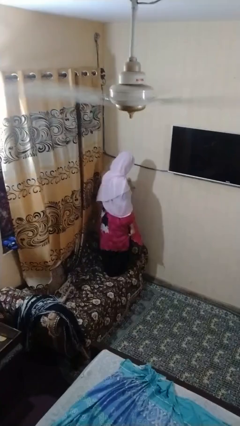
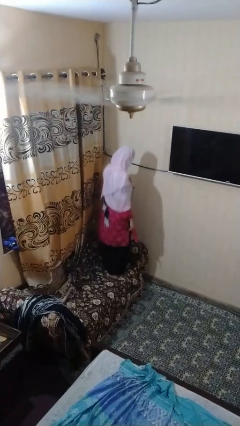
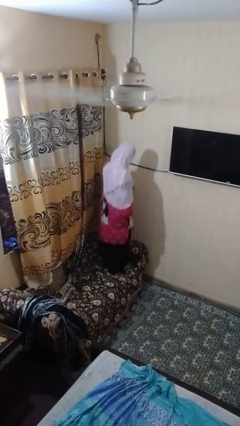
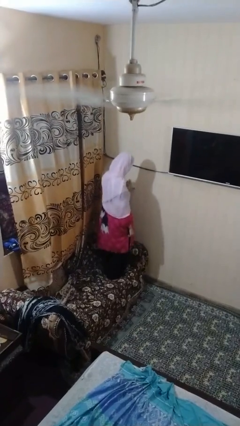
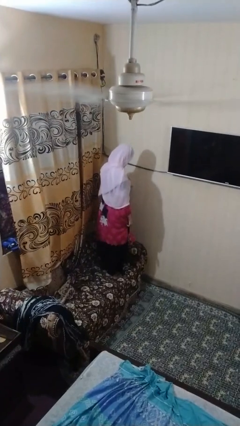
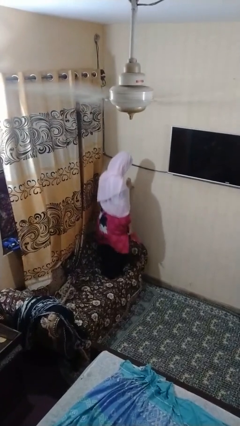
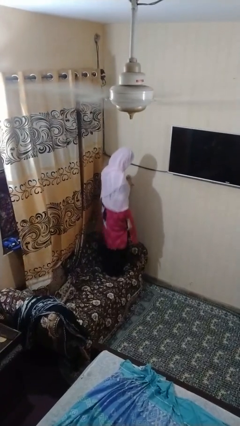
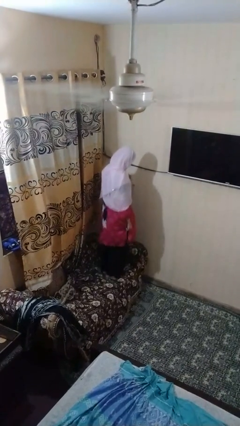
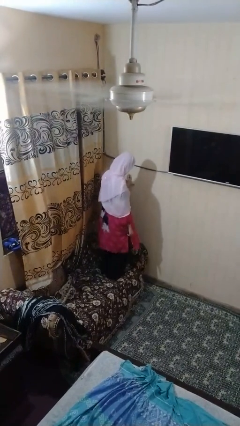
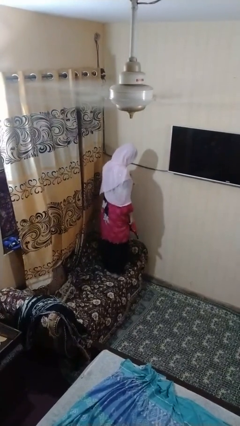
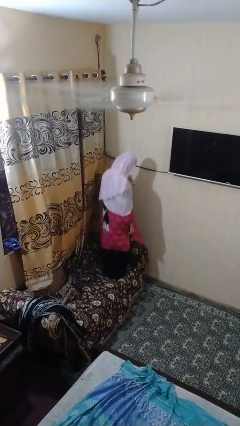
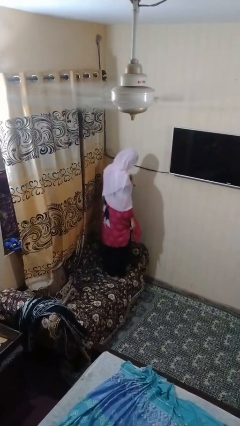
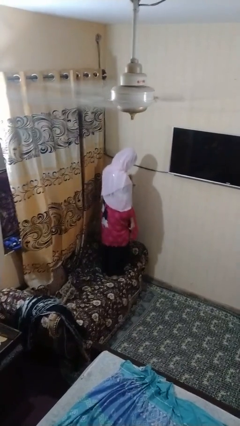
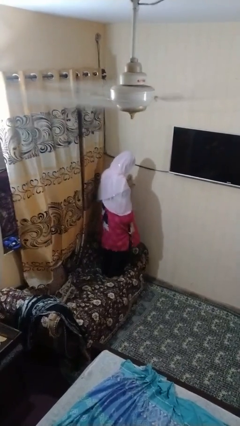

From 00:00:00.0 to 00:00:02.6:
person jumps on couch

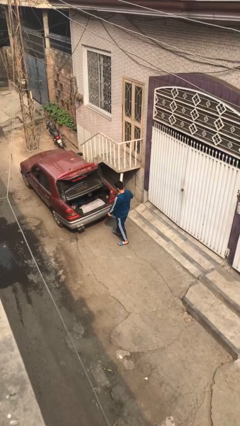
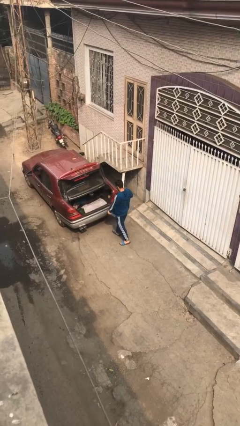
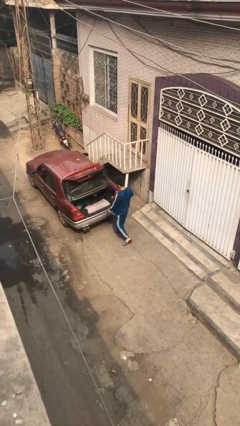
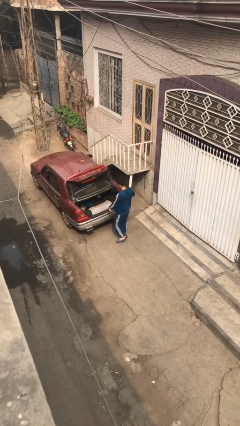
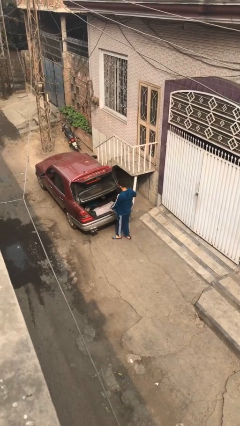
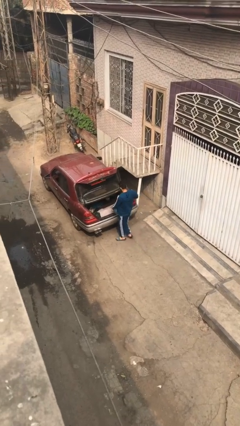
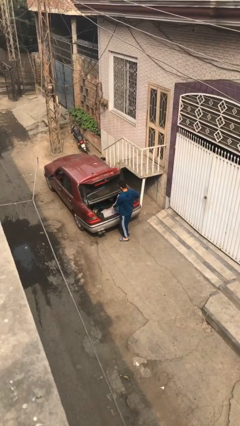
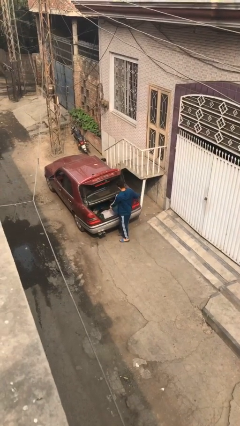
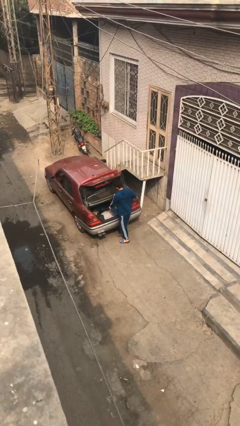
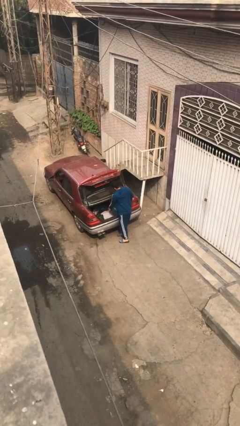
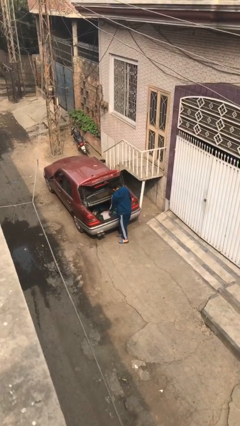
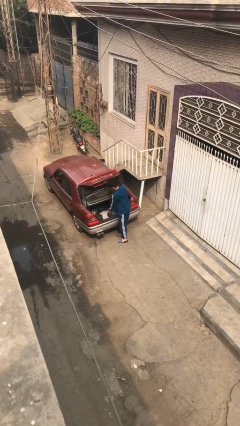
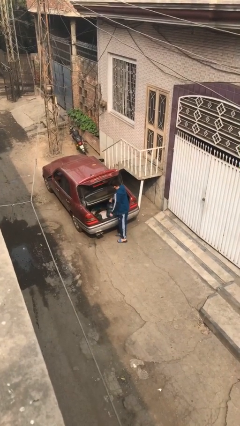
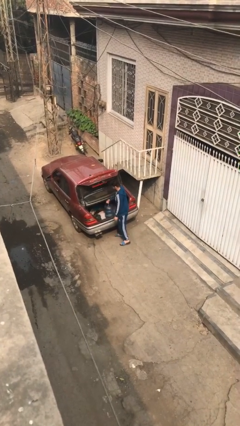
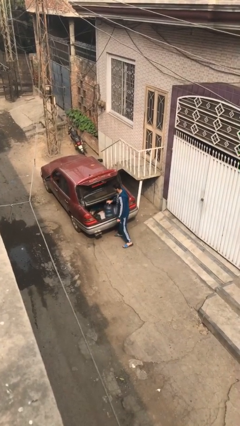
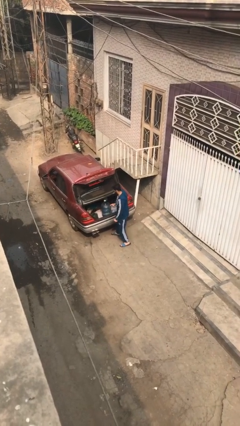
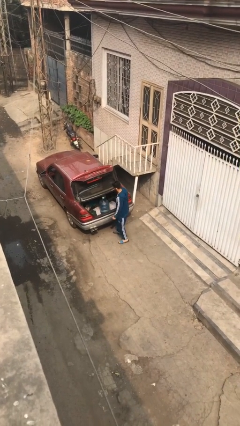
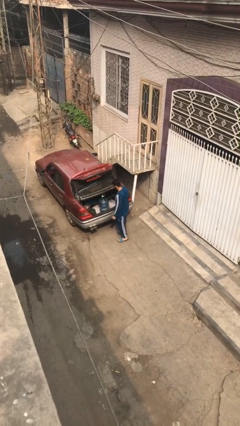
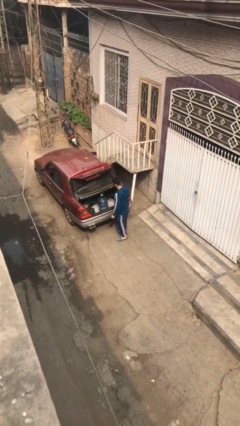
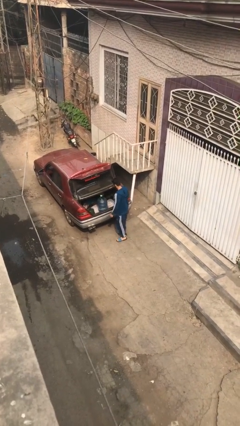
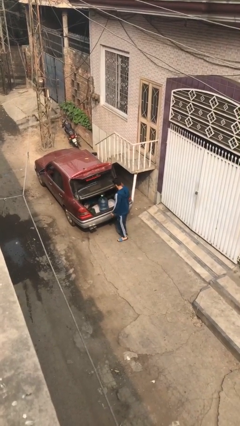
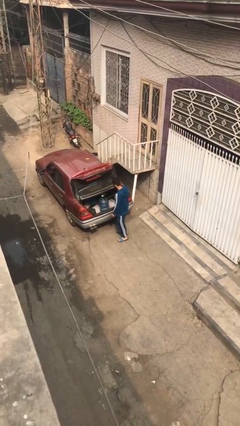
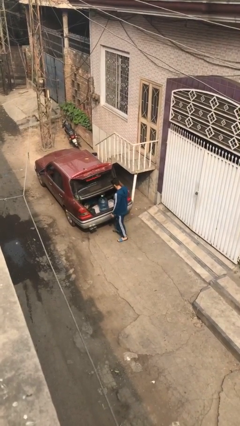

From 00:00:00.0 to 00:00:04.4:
person loads car

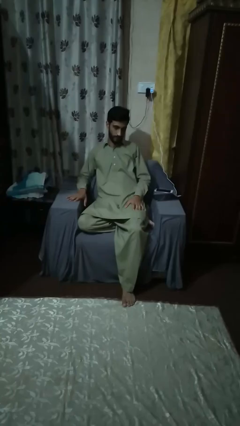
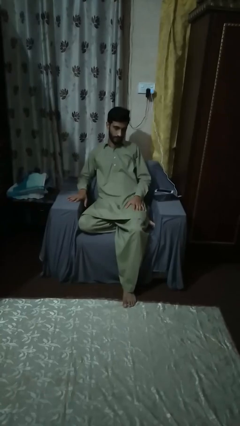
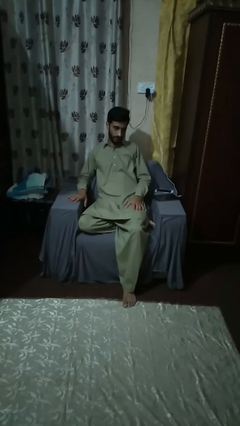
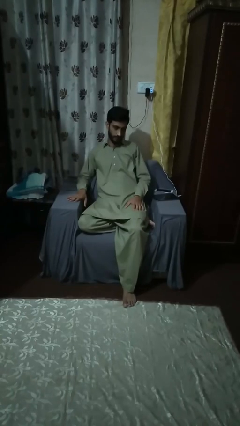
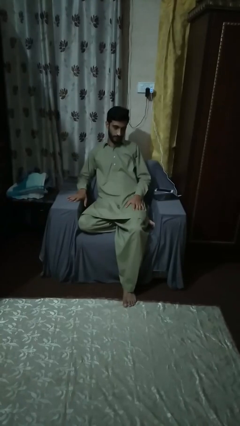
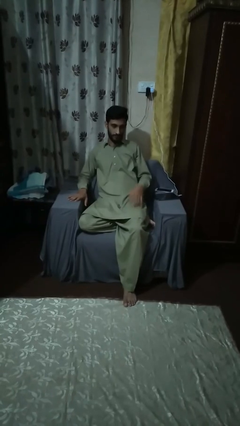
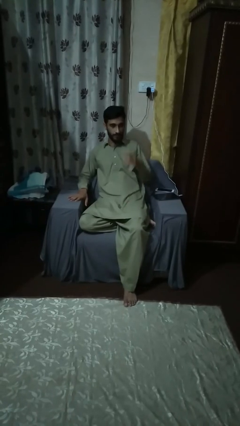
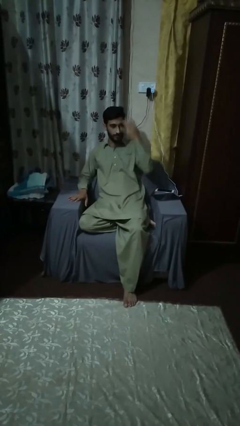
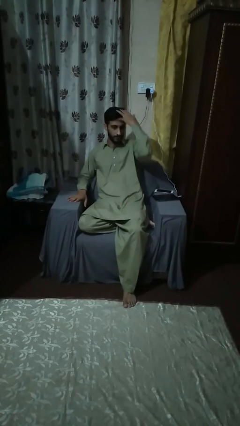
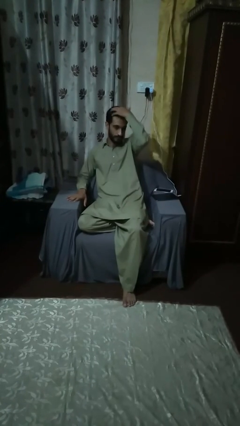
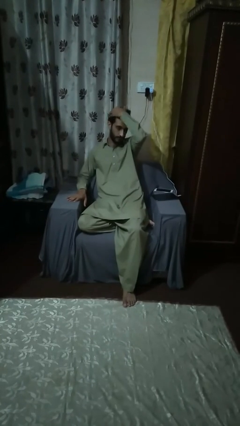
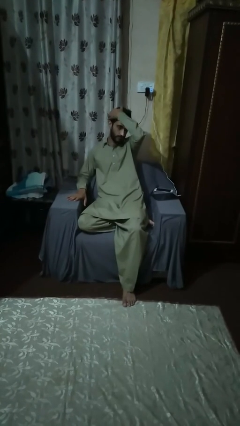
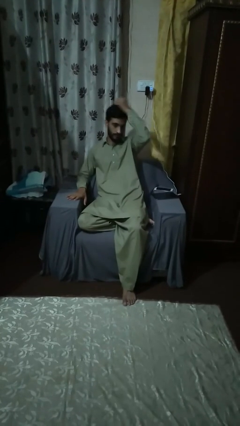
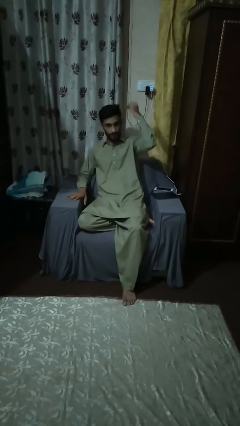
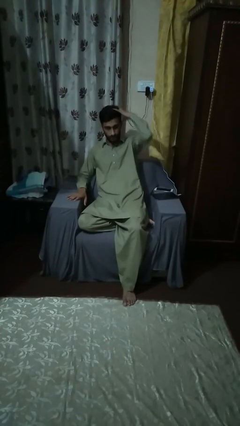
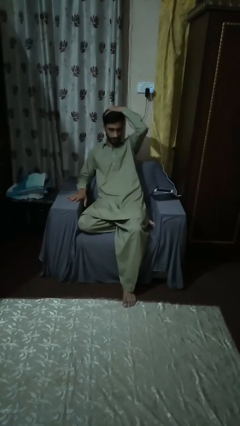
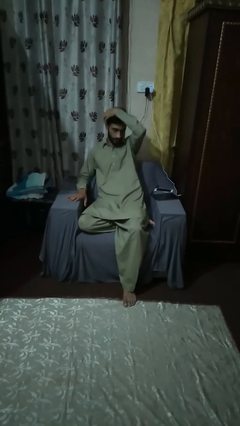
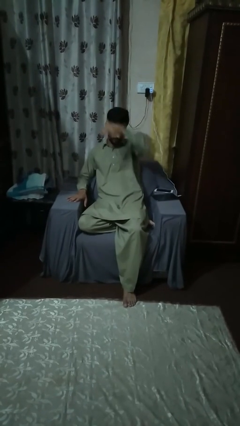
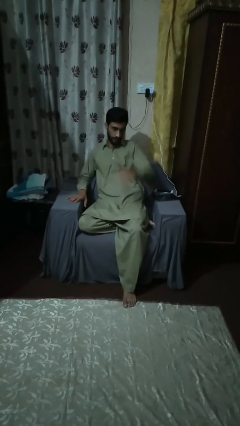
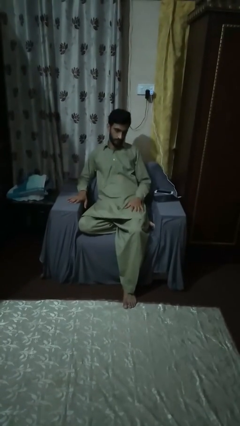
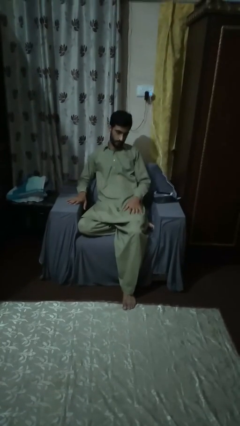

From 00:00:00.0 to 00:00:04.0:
person strokes hair

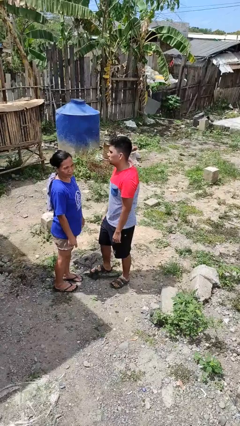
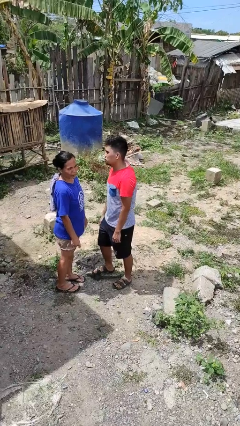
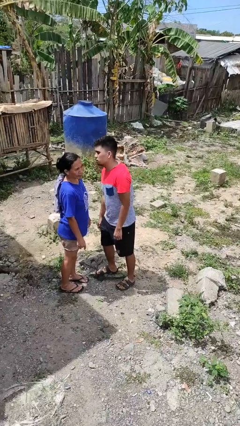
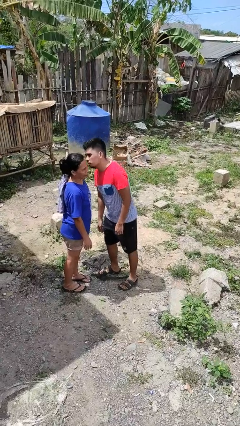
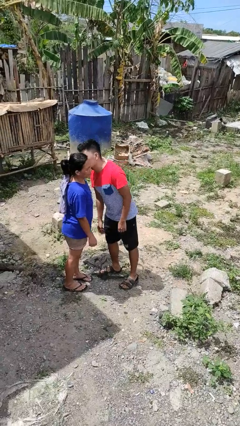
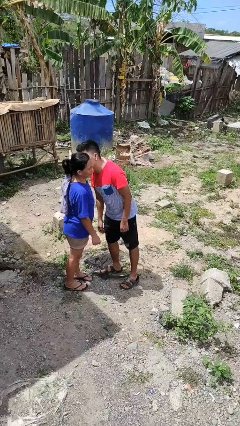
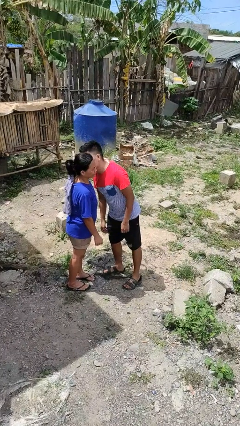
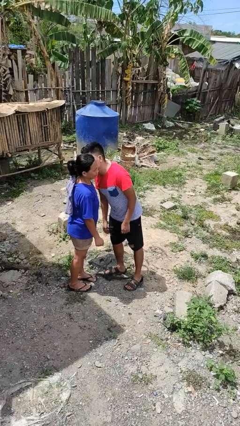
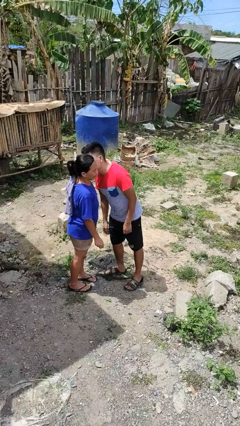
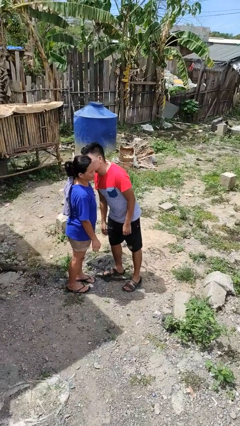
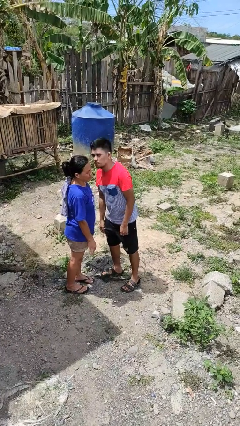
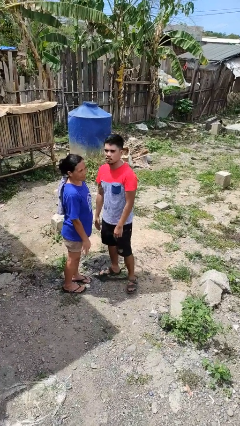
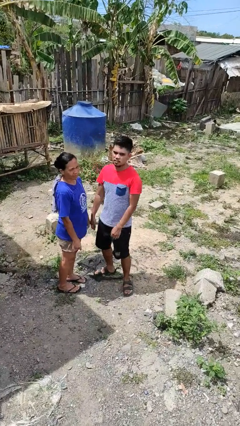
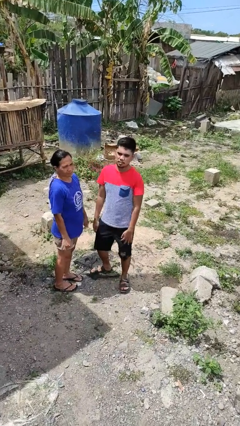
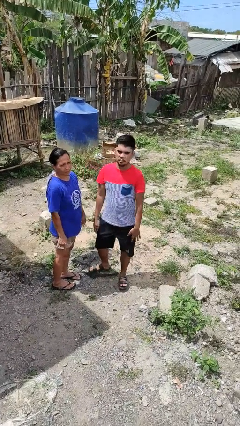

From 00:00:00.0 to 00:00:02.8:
person kisses cheek of person

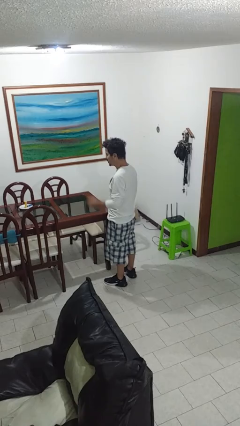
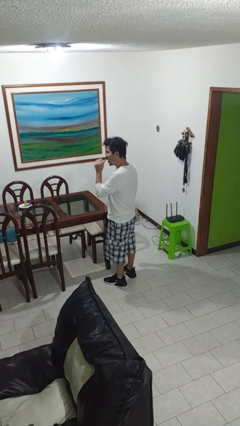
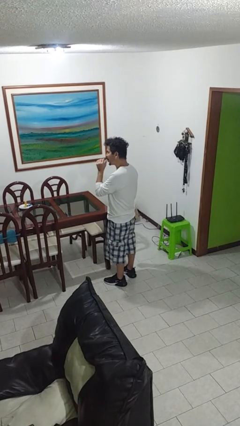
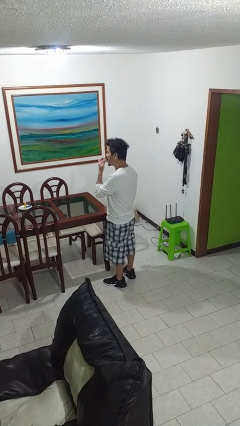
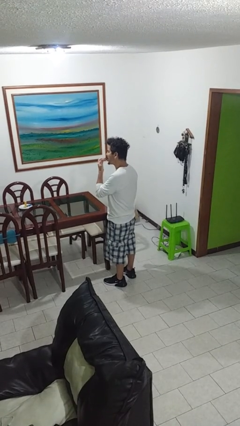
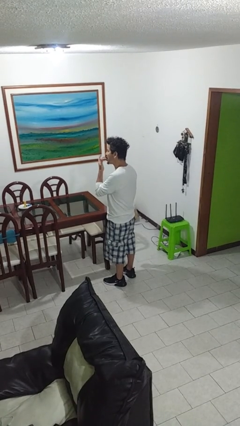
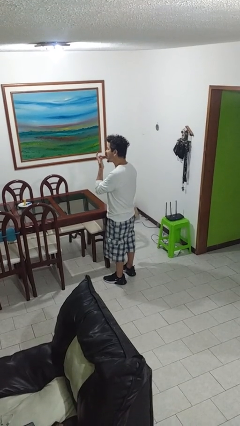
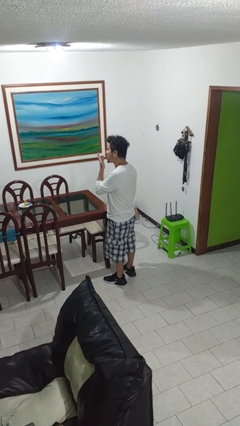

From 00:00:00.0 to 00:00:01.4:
person licks fingers

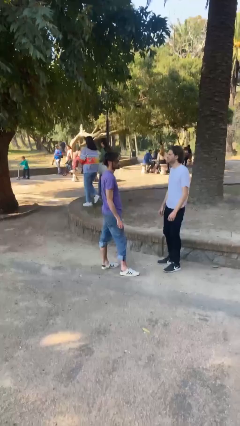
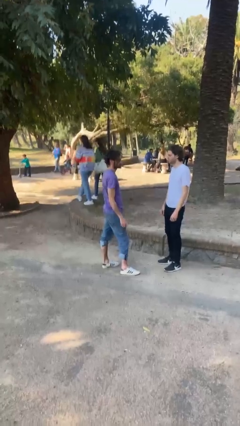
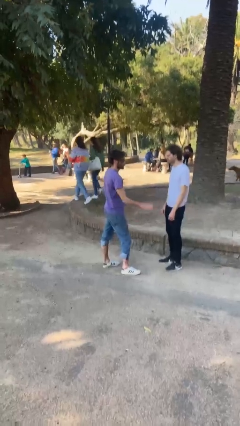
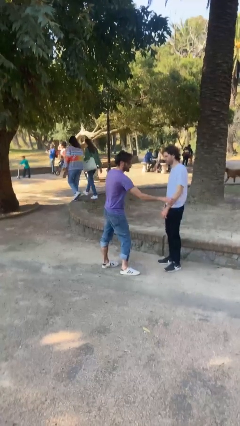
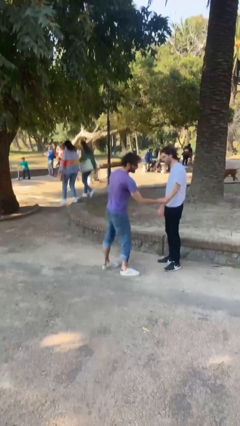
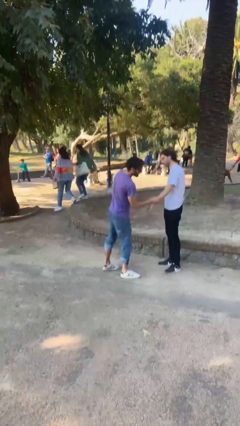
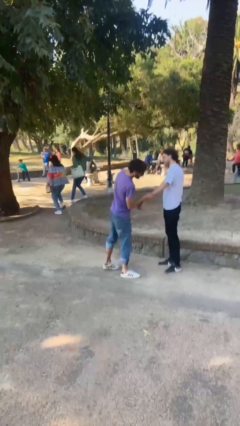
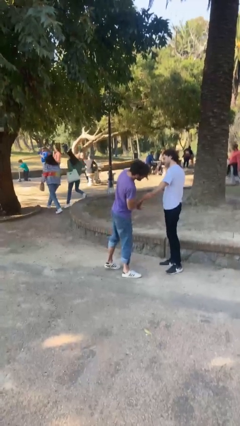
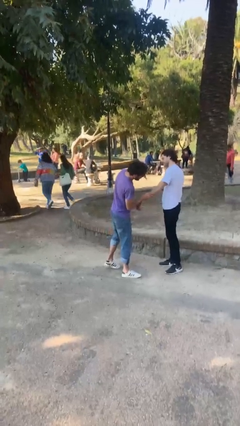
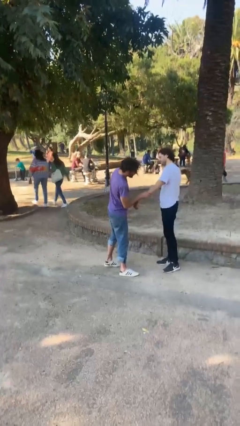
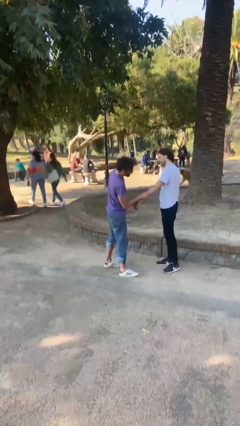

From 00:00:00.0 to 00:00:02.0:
person grabs person by forearm
